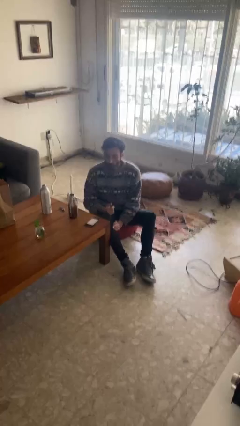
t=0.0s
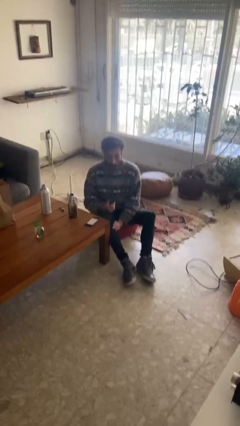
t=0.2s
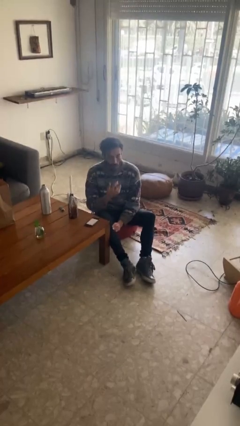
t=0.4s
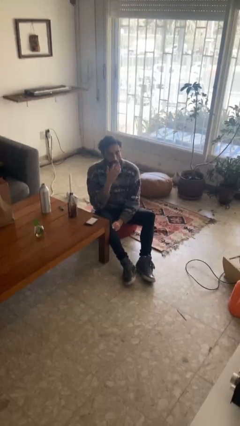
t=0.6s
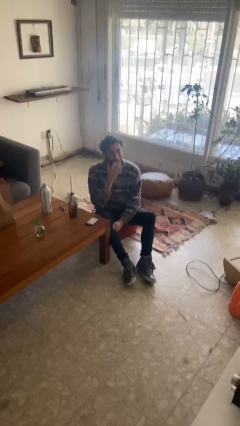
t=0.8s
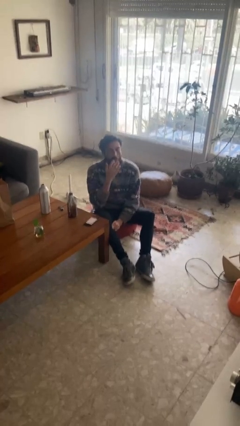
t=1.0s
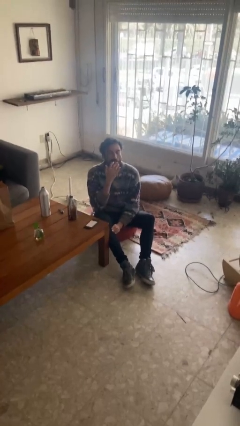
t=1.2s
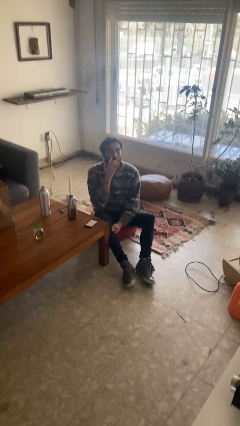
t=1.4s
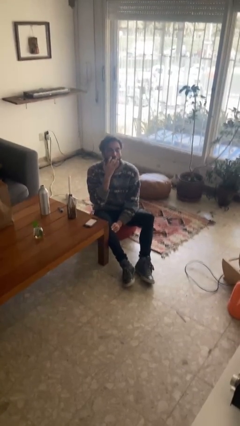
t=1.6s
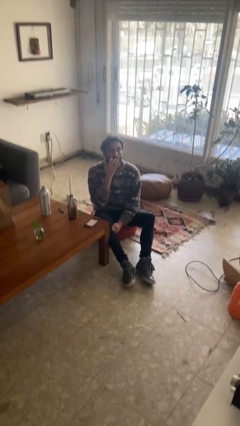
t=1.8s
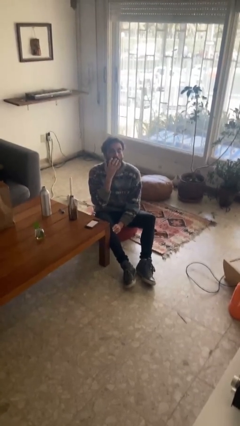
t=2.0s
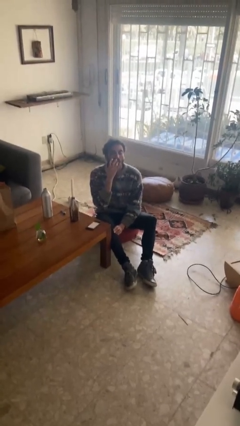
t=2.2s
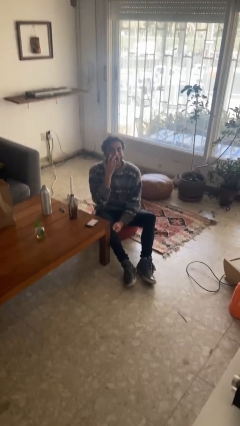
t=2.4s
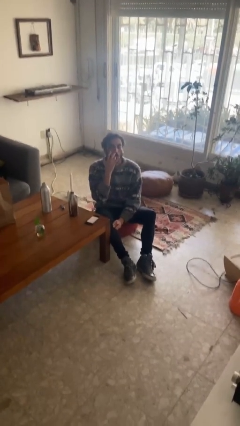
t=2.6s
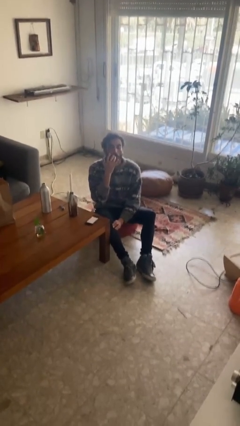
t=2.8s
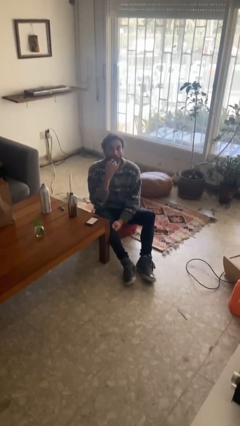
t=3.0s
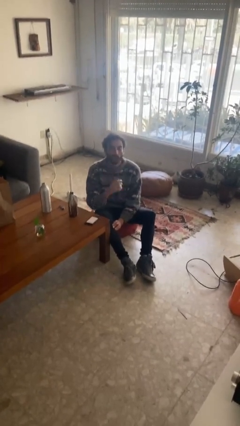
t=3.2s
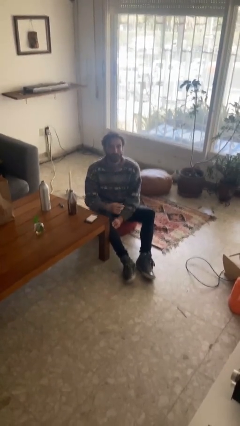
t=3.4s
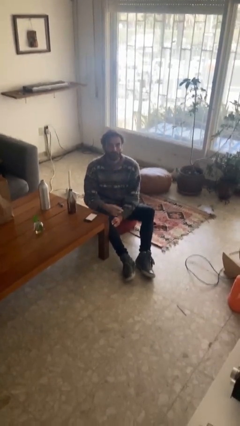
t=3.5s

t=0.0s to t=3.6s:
person licks fingers

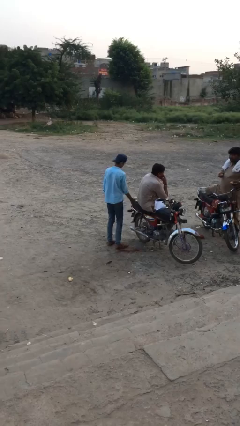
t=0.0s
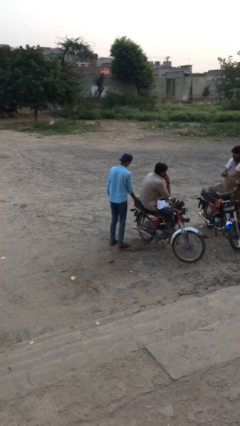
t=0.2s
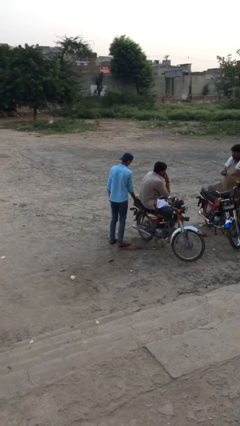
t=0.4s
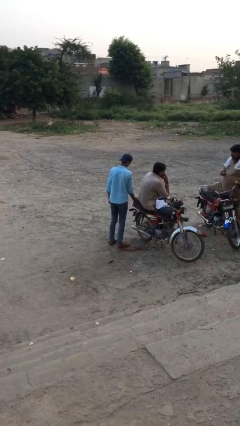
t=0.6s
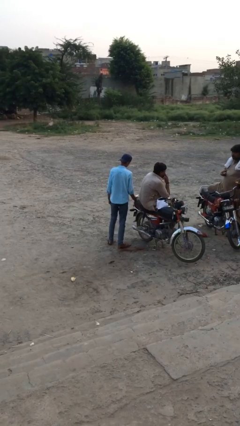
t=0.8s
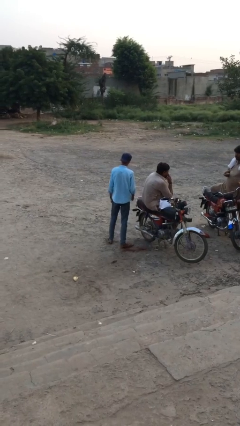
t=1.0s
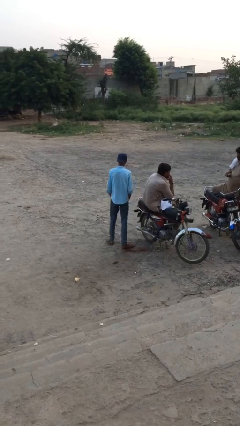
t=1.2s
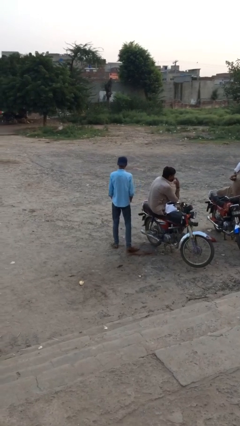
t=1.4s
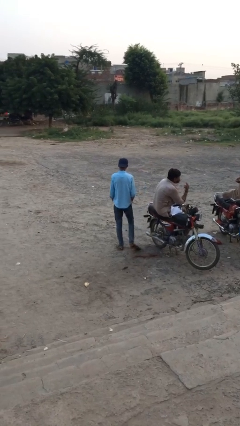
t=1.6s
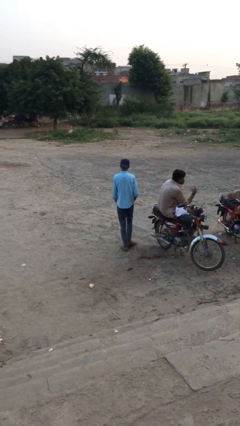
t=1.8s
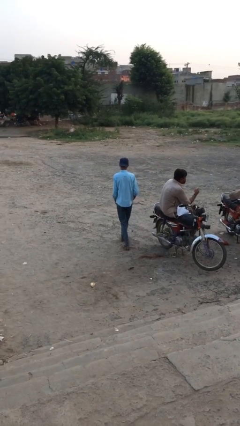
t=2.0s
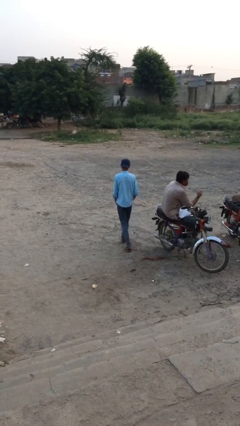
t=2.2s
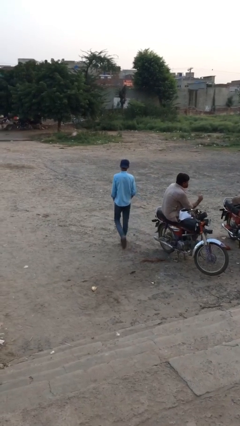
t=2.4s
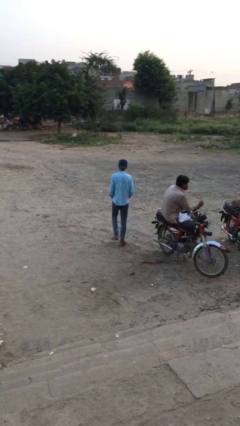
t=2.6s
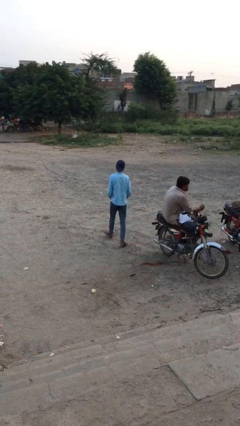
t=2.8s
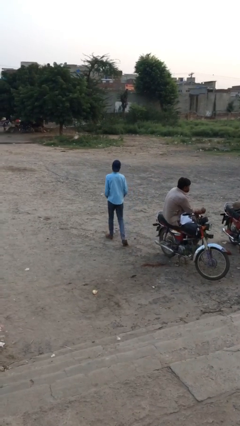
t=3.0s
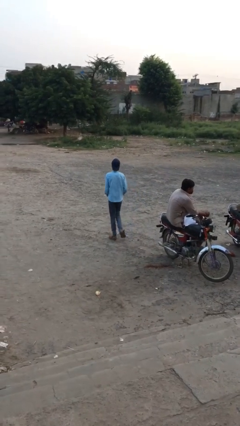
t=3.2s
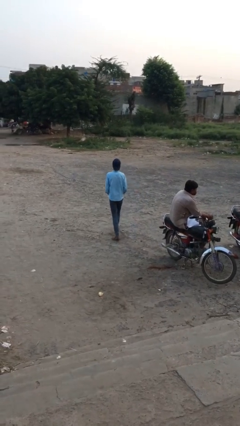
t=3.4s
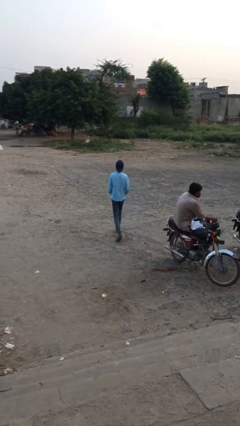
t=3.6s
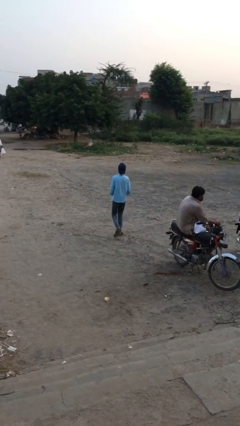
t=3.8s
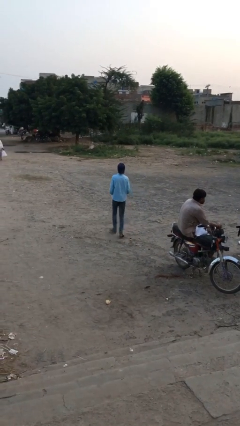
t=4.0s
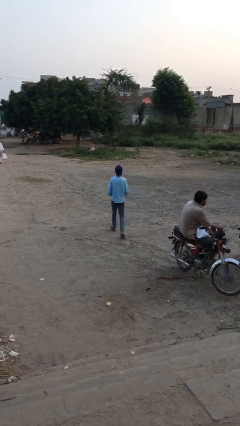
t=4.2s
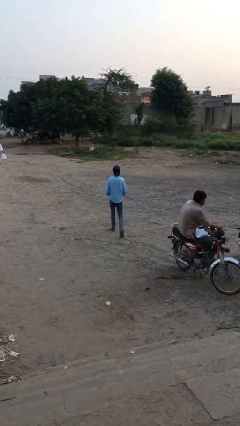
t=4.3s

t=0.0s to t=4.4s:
person steals object from person

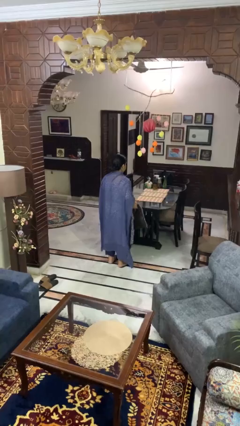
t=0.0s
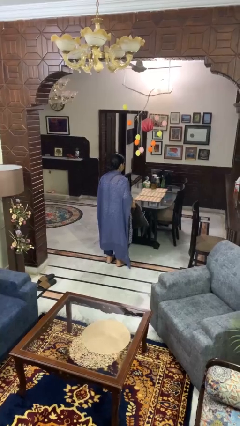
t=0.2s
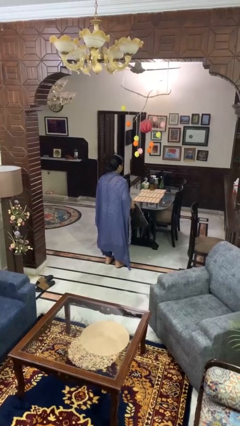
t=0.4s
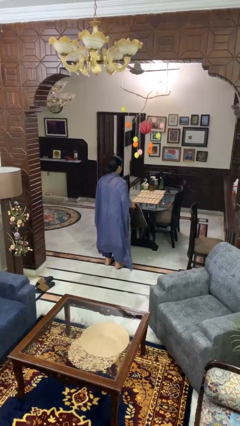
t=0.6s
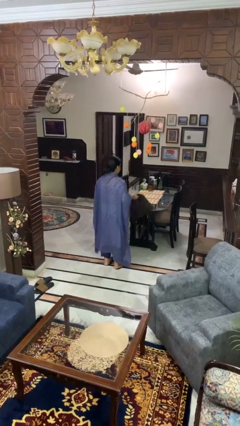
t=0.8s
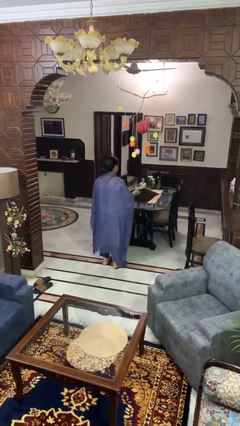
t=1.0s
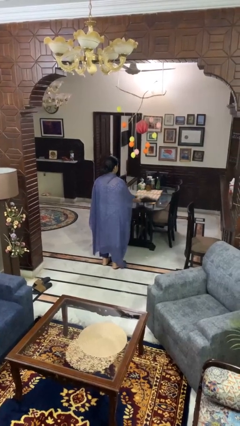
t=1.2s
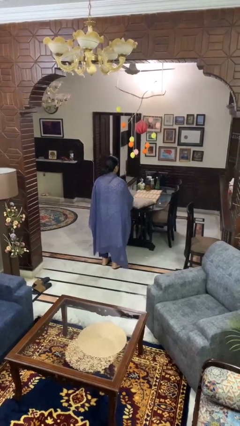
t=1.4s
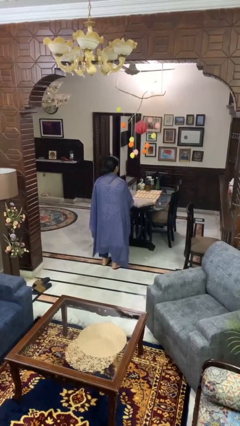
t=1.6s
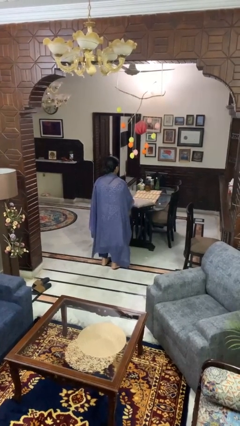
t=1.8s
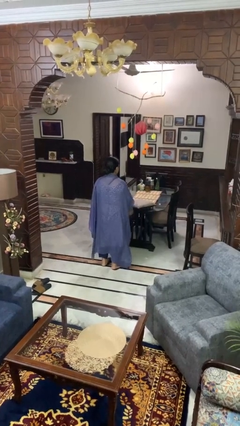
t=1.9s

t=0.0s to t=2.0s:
person throws object on table

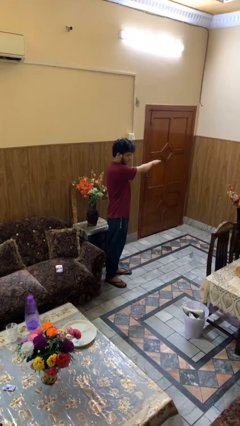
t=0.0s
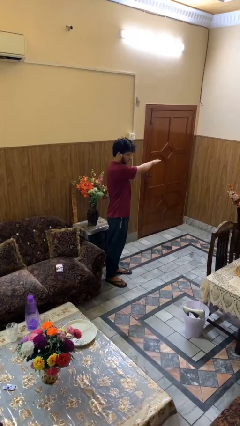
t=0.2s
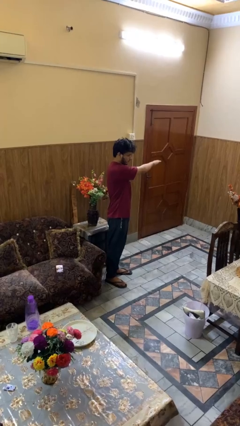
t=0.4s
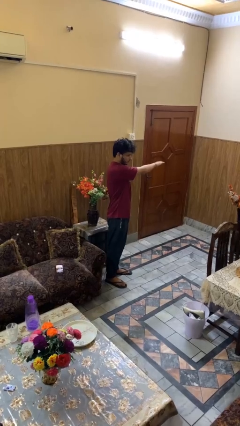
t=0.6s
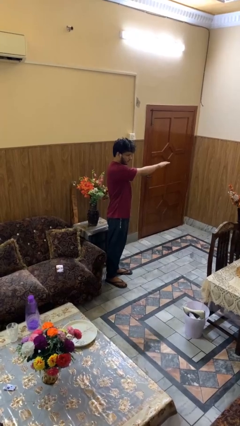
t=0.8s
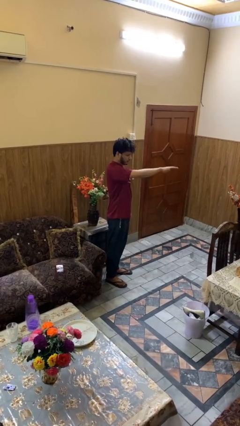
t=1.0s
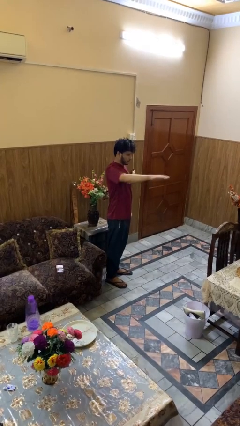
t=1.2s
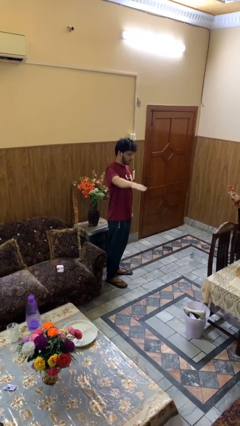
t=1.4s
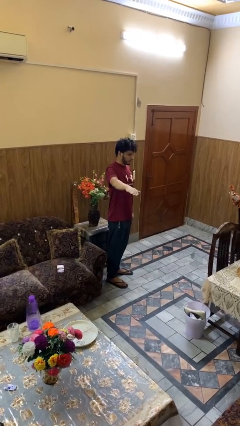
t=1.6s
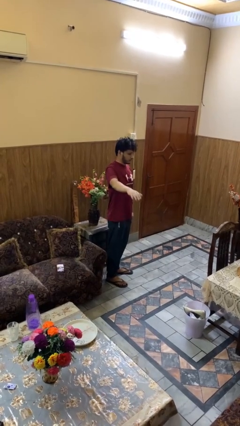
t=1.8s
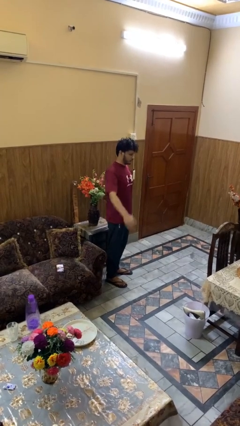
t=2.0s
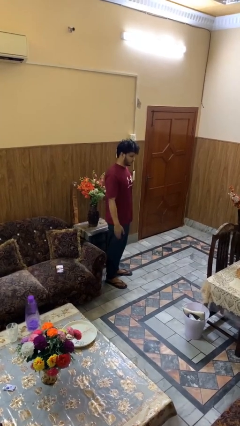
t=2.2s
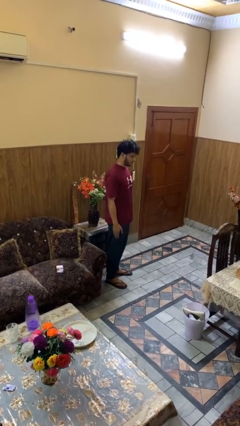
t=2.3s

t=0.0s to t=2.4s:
person gestures swipe right

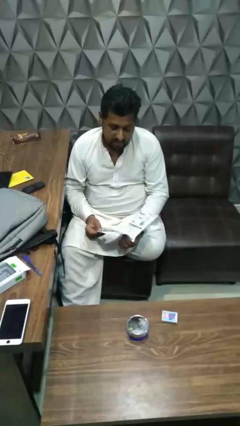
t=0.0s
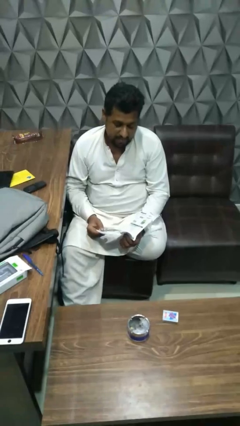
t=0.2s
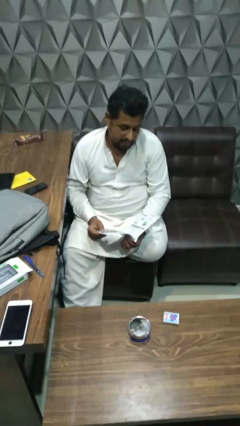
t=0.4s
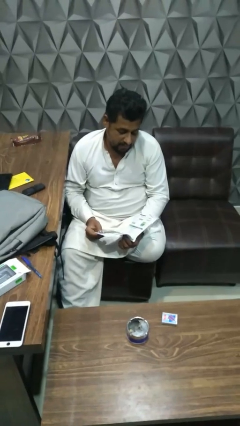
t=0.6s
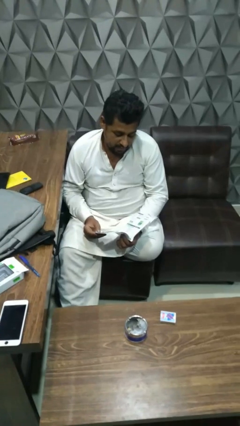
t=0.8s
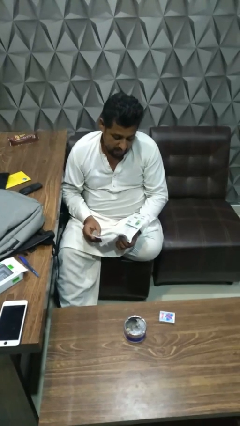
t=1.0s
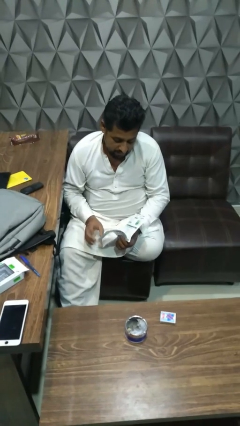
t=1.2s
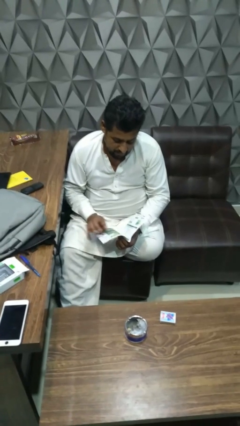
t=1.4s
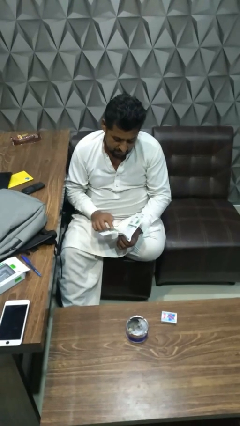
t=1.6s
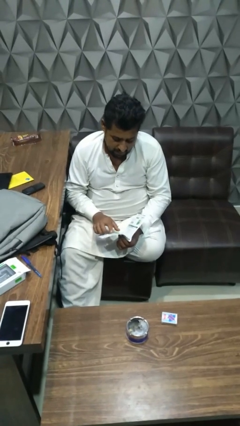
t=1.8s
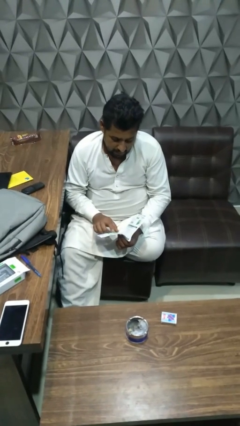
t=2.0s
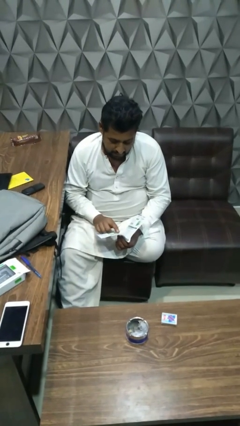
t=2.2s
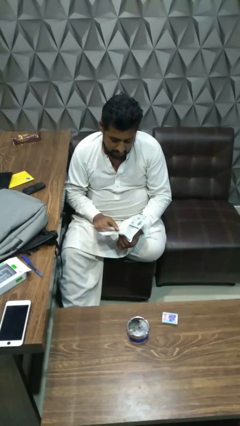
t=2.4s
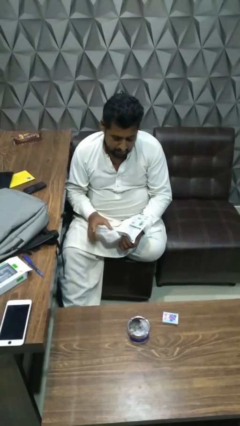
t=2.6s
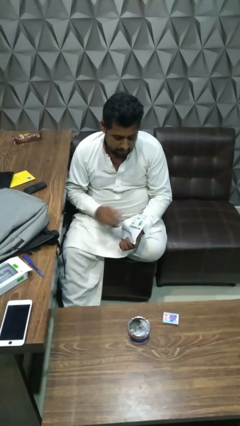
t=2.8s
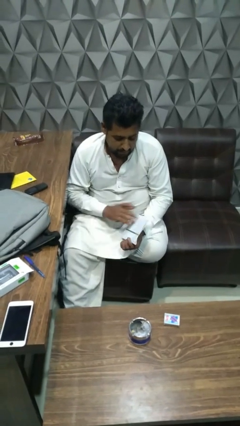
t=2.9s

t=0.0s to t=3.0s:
person reads book

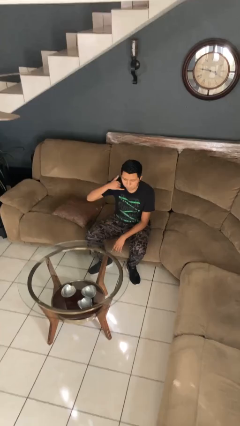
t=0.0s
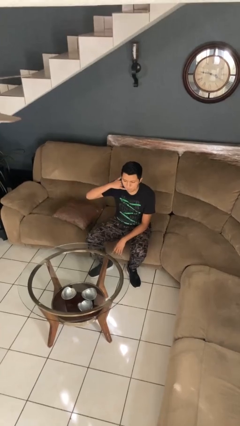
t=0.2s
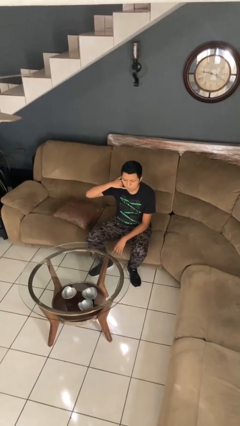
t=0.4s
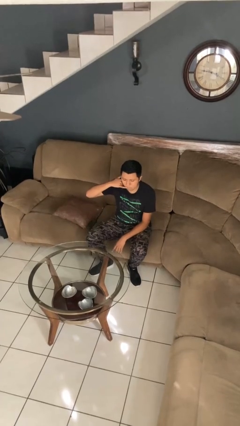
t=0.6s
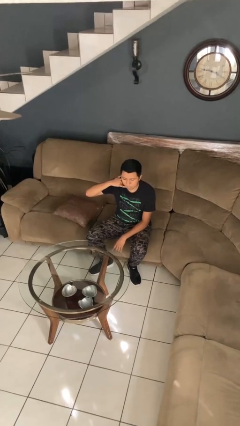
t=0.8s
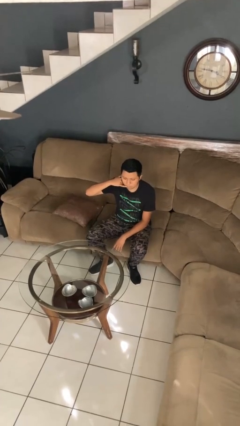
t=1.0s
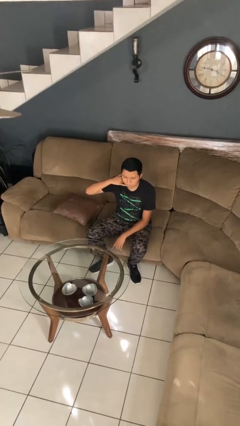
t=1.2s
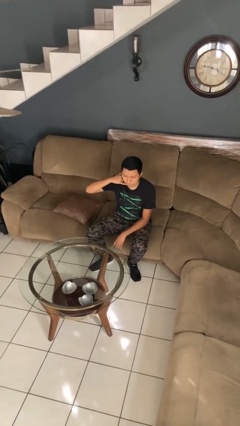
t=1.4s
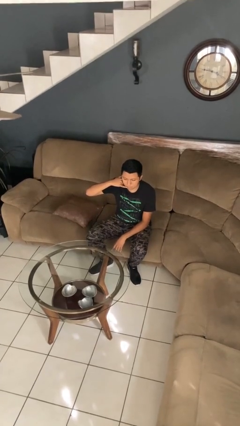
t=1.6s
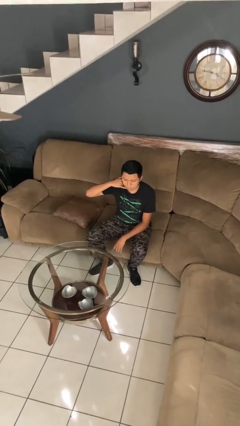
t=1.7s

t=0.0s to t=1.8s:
person gestures call me
